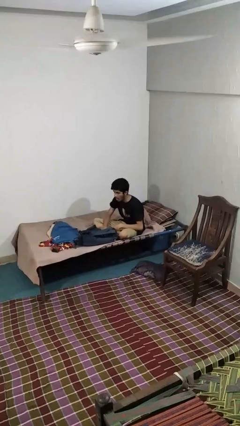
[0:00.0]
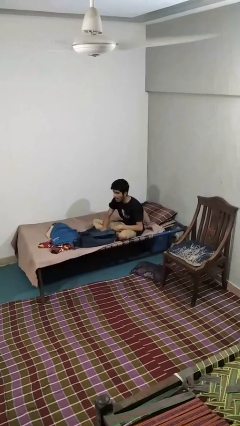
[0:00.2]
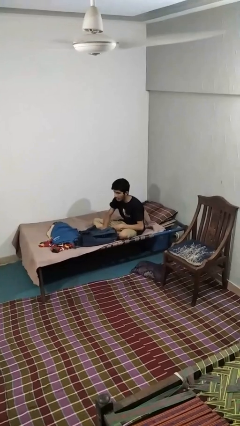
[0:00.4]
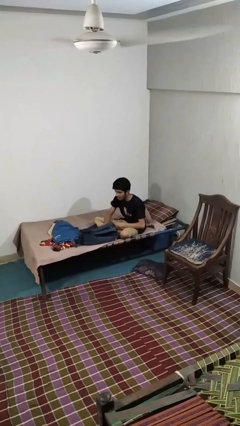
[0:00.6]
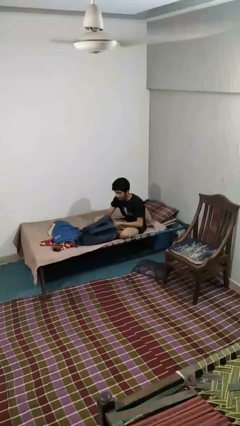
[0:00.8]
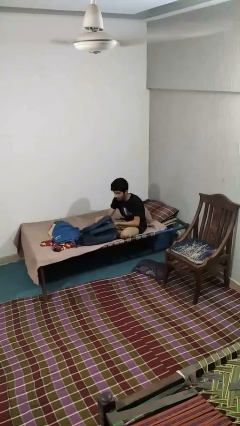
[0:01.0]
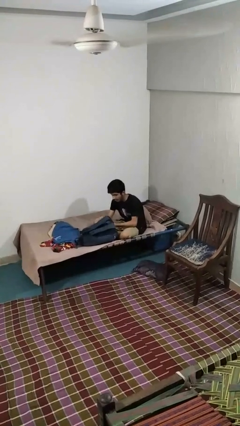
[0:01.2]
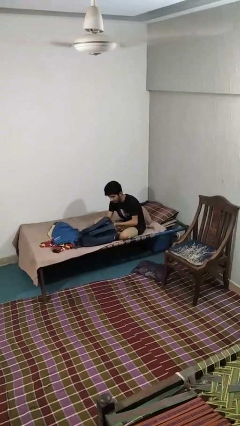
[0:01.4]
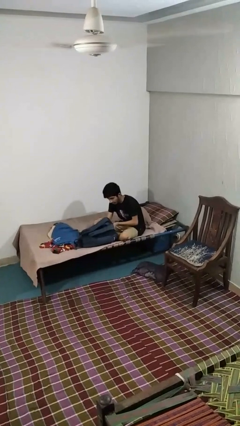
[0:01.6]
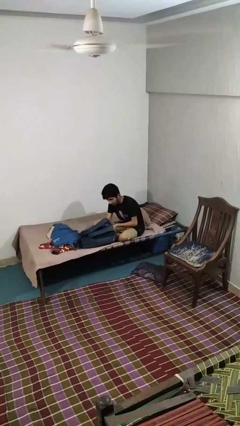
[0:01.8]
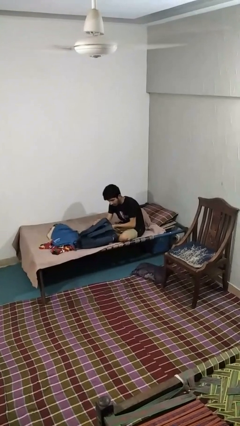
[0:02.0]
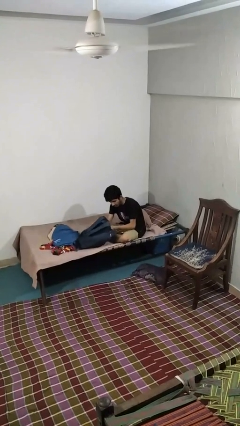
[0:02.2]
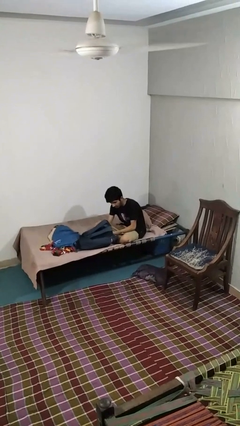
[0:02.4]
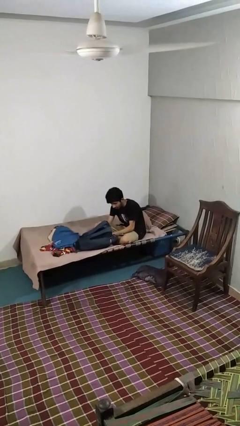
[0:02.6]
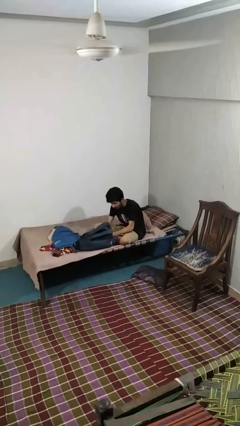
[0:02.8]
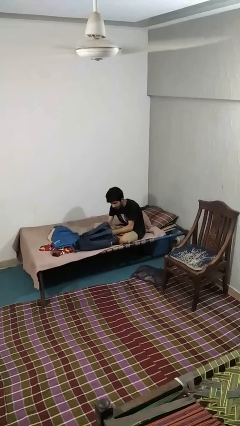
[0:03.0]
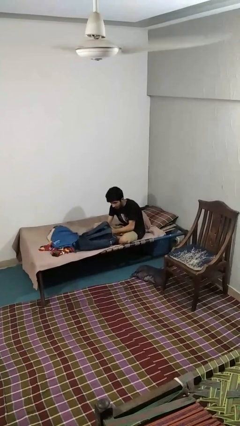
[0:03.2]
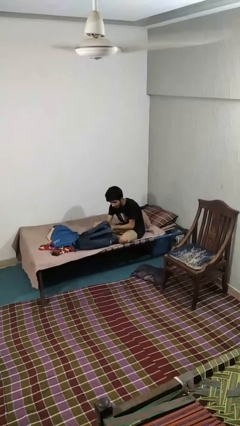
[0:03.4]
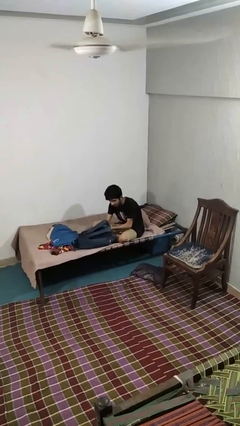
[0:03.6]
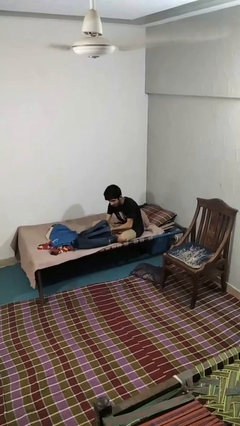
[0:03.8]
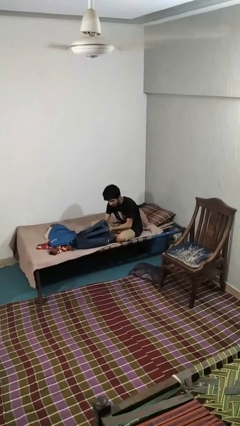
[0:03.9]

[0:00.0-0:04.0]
person searches in backpack

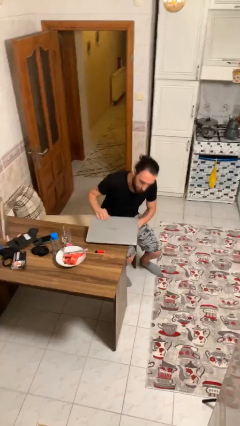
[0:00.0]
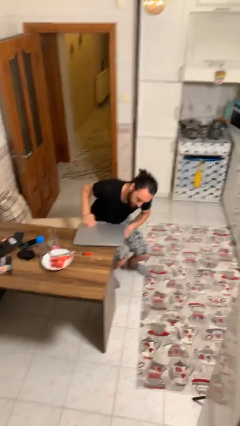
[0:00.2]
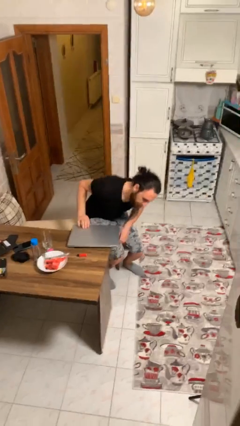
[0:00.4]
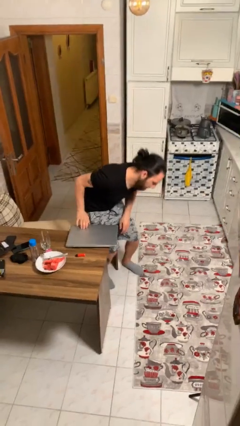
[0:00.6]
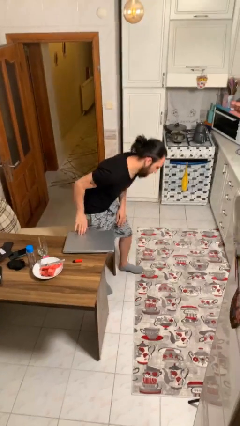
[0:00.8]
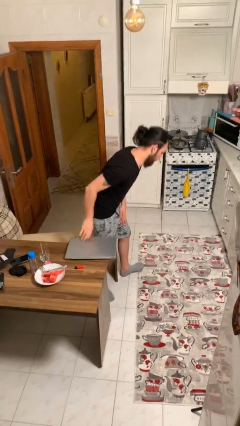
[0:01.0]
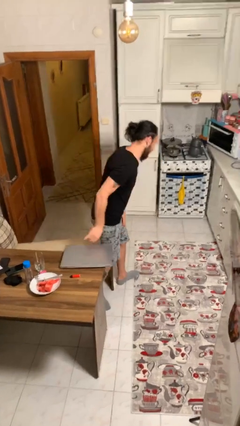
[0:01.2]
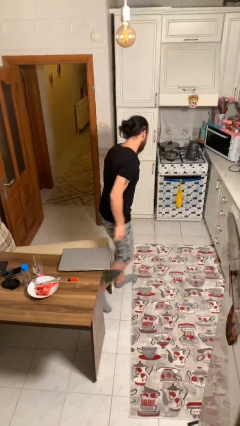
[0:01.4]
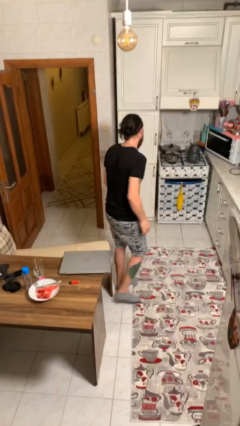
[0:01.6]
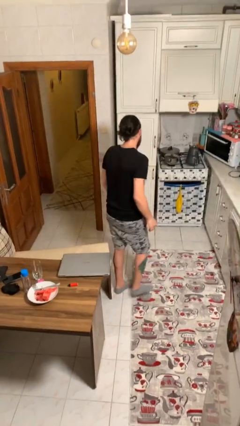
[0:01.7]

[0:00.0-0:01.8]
person stands up

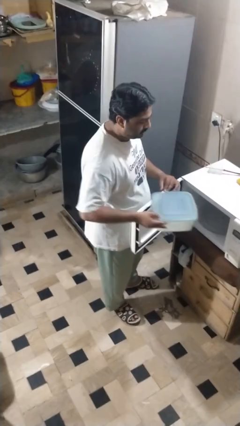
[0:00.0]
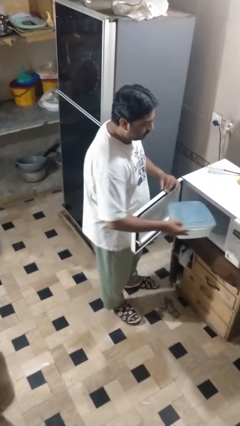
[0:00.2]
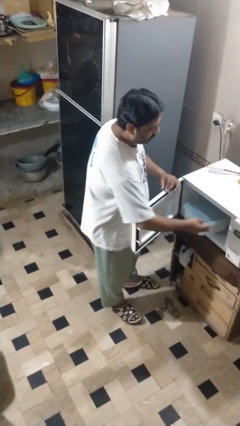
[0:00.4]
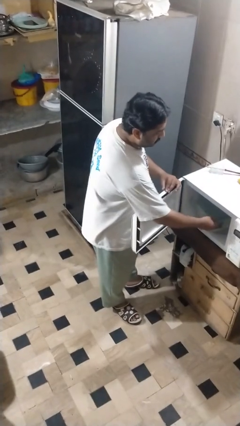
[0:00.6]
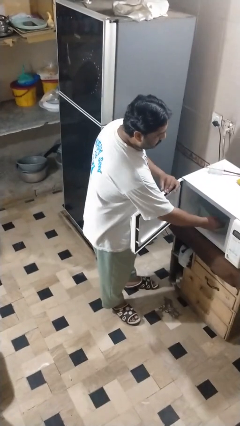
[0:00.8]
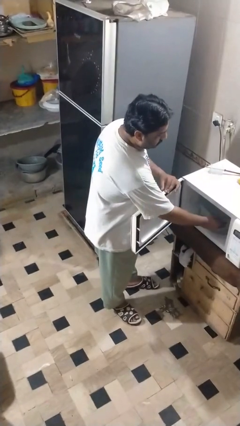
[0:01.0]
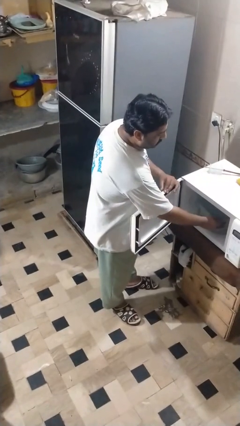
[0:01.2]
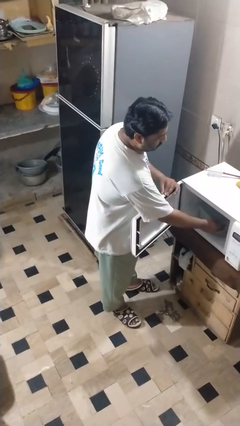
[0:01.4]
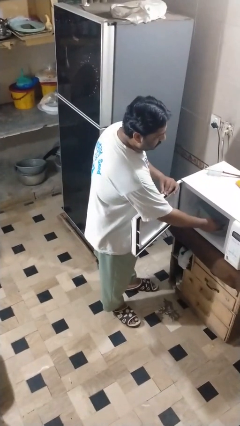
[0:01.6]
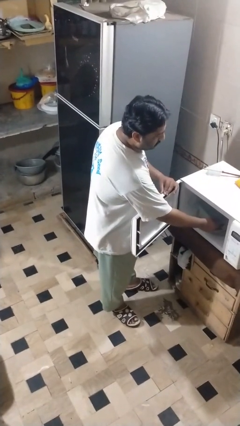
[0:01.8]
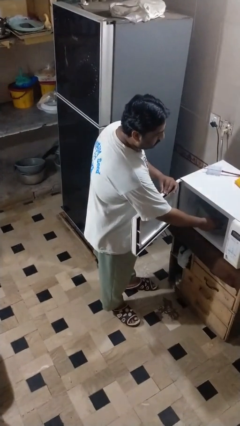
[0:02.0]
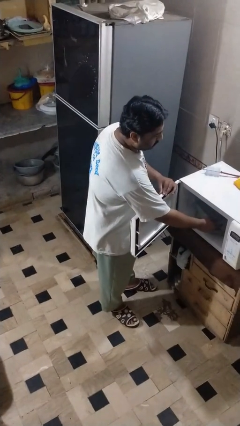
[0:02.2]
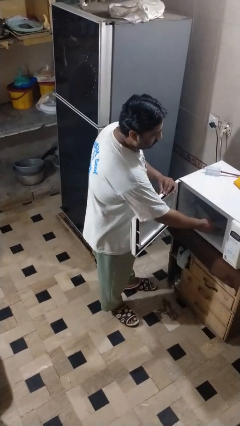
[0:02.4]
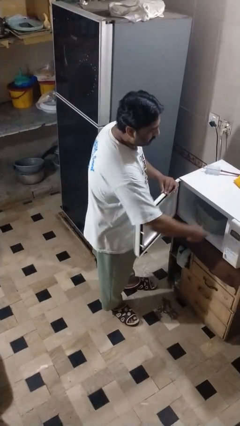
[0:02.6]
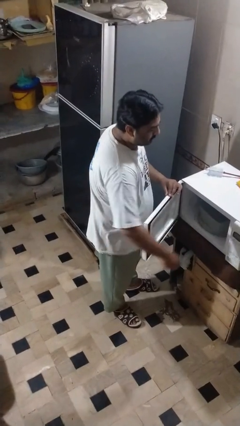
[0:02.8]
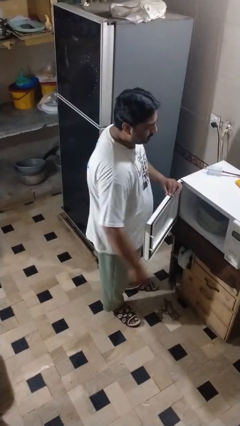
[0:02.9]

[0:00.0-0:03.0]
person puts object into microwave

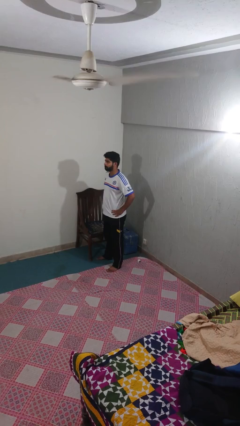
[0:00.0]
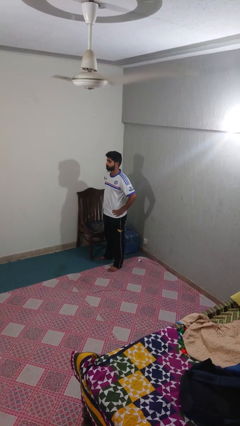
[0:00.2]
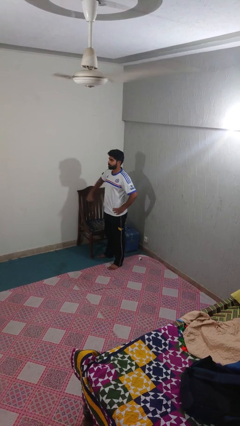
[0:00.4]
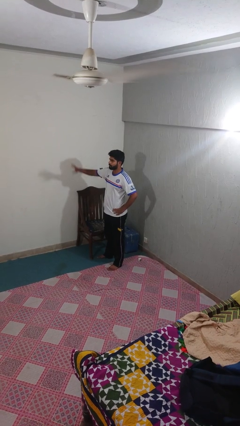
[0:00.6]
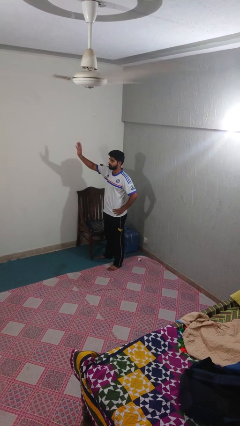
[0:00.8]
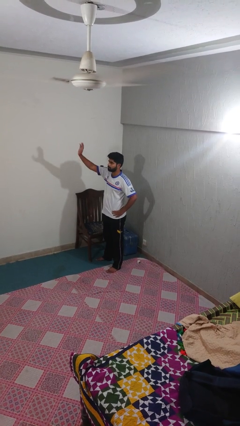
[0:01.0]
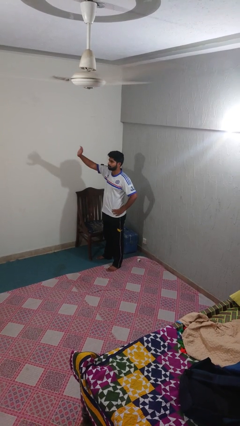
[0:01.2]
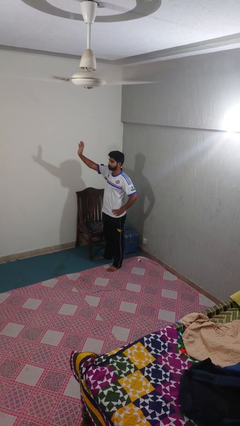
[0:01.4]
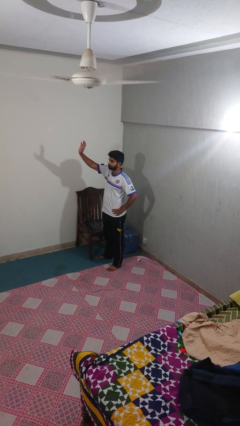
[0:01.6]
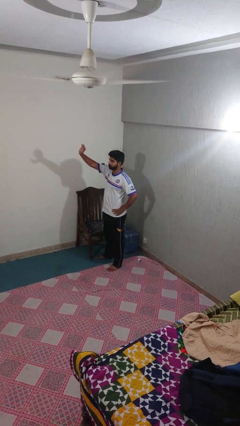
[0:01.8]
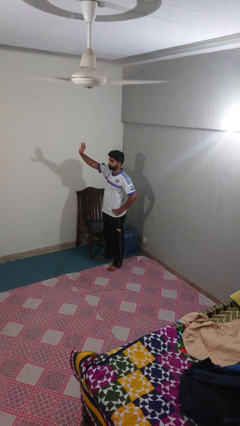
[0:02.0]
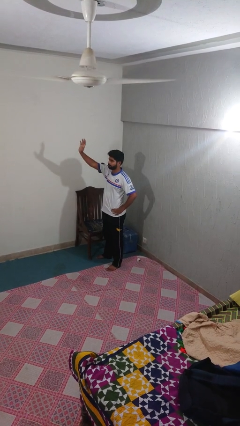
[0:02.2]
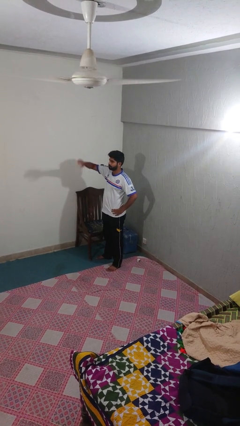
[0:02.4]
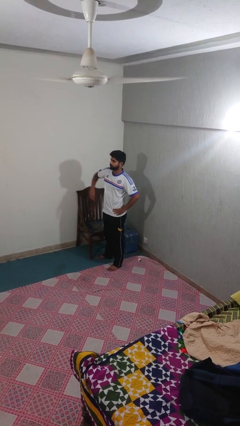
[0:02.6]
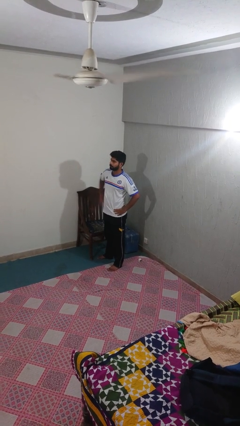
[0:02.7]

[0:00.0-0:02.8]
person waves at person

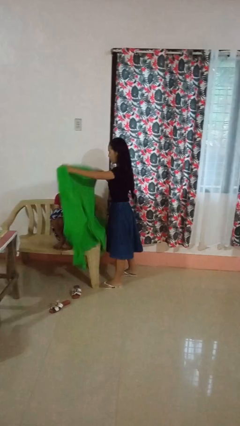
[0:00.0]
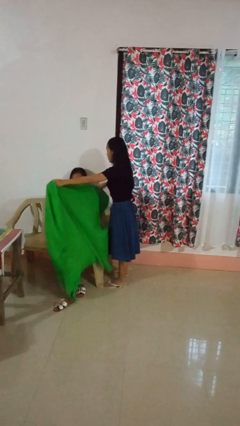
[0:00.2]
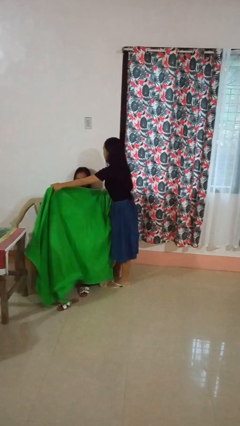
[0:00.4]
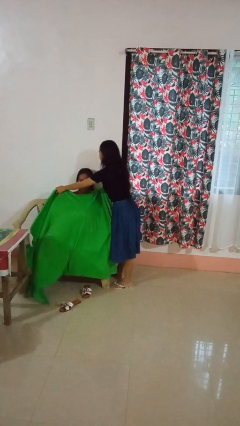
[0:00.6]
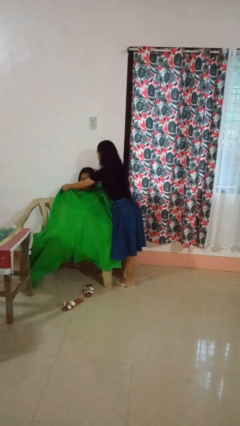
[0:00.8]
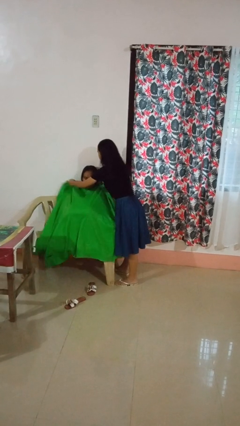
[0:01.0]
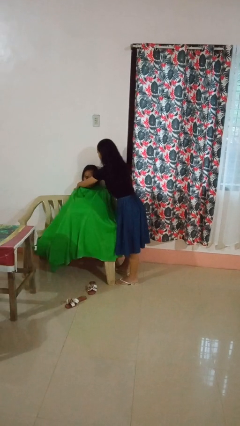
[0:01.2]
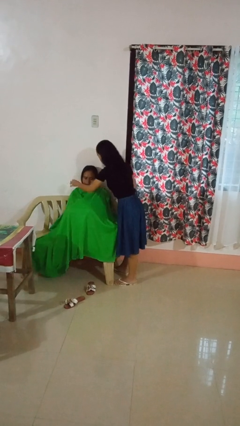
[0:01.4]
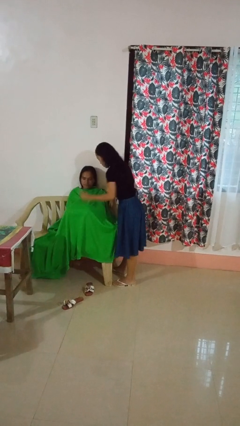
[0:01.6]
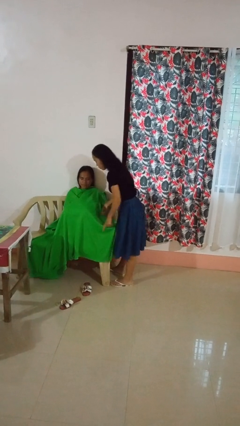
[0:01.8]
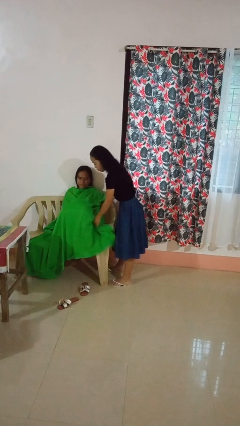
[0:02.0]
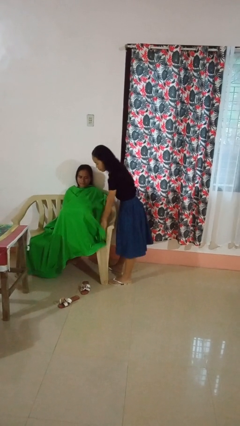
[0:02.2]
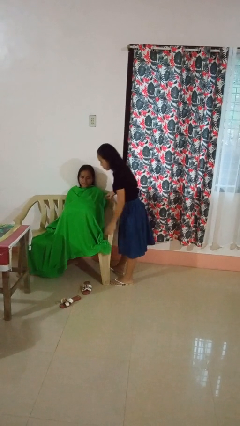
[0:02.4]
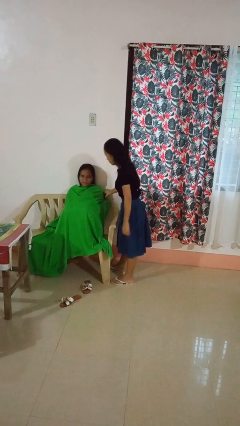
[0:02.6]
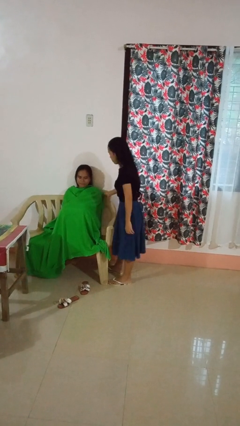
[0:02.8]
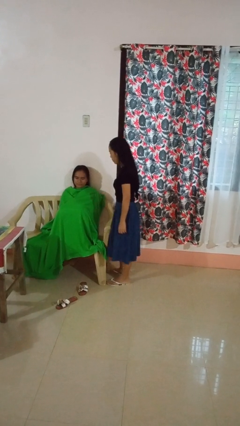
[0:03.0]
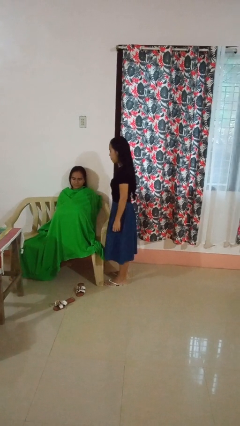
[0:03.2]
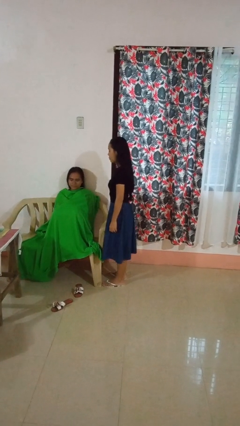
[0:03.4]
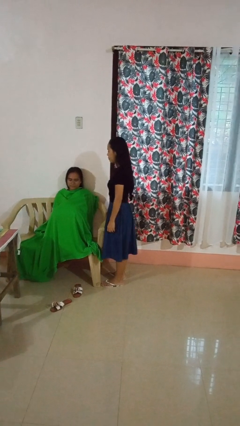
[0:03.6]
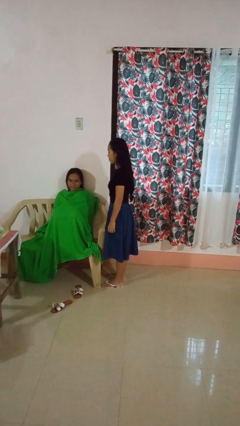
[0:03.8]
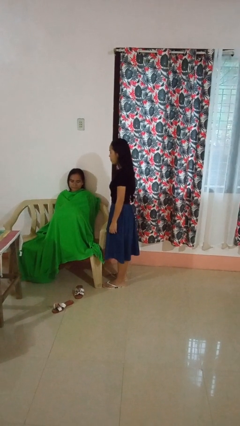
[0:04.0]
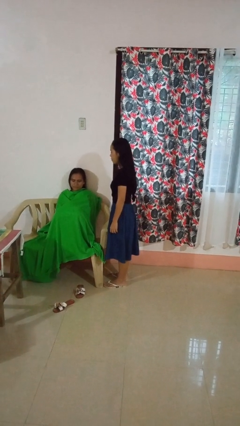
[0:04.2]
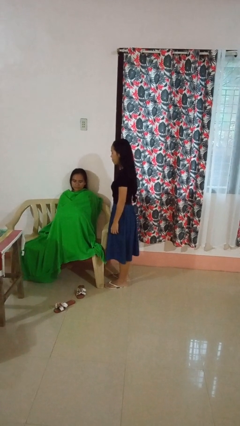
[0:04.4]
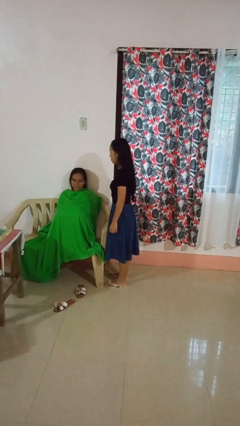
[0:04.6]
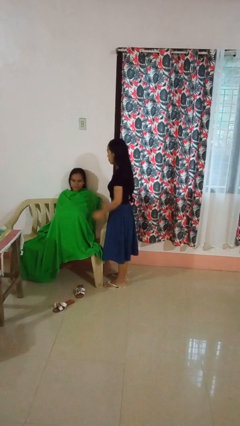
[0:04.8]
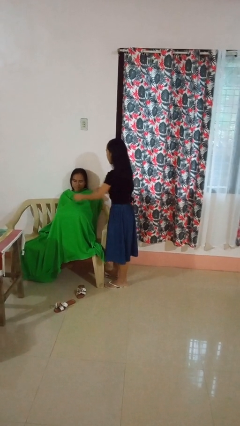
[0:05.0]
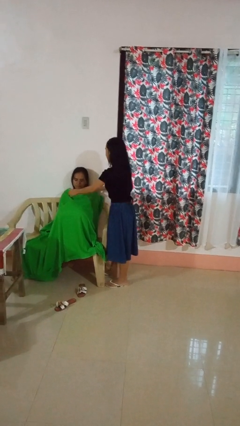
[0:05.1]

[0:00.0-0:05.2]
person covers friend with blanket

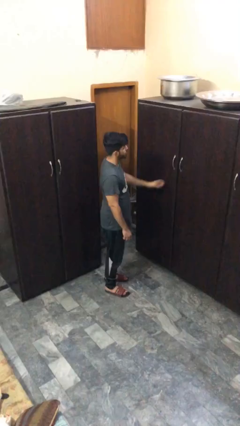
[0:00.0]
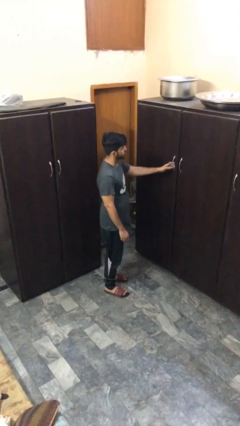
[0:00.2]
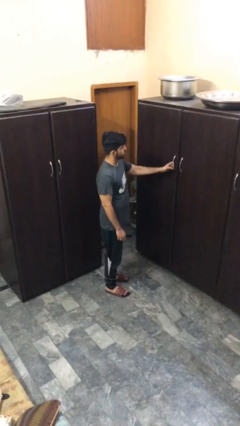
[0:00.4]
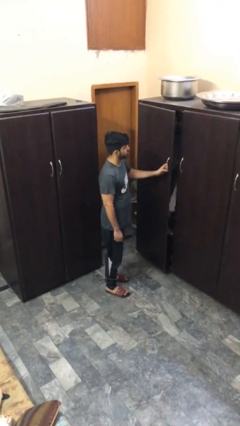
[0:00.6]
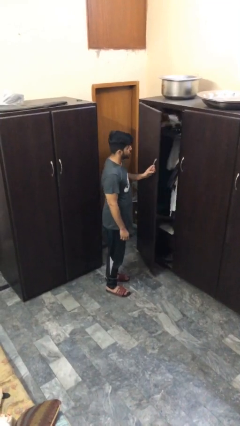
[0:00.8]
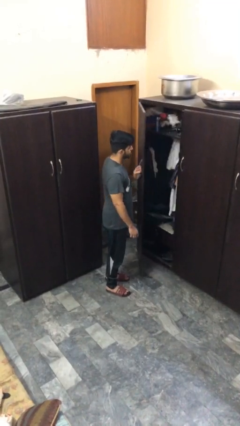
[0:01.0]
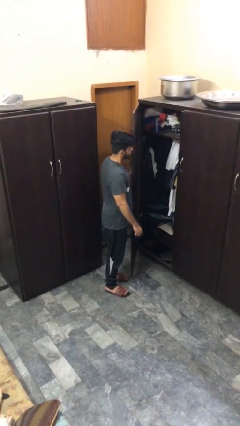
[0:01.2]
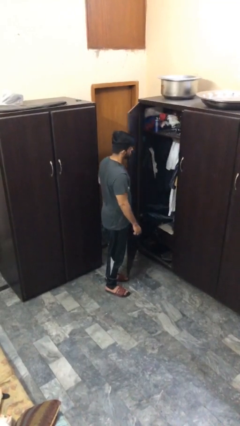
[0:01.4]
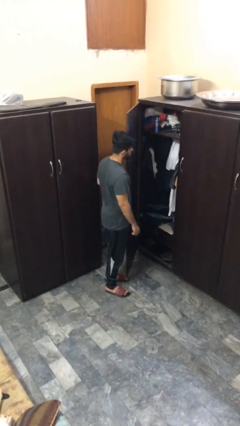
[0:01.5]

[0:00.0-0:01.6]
person opens dresser drawer
